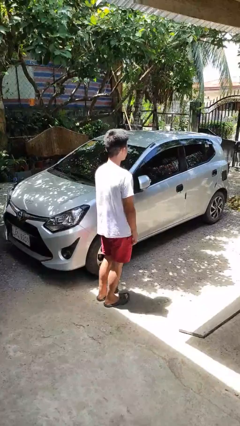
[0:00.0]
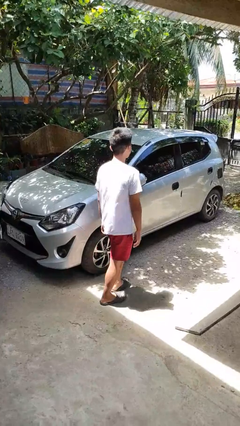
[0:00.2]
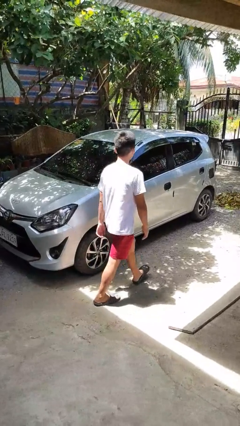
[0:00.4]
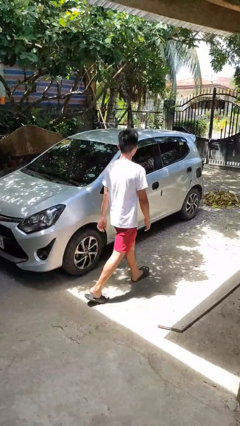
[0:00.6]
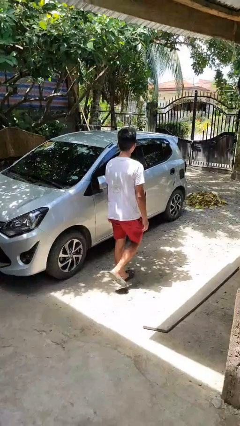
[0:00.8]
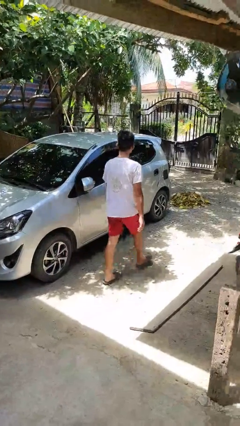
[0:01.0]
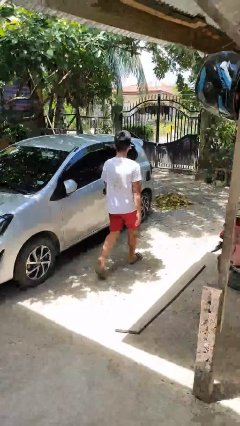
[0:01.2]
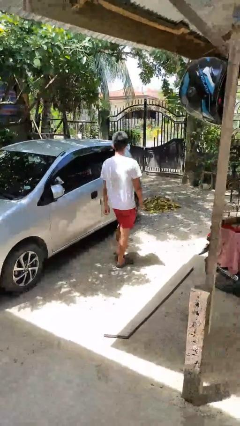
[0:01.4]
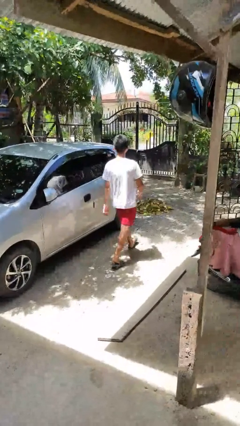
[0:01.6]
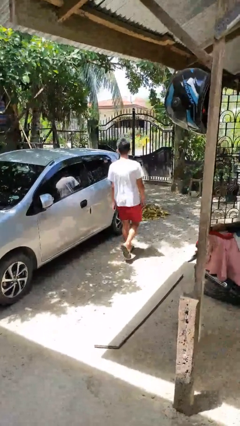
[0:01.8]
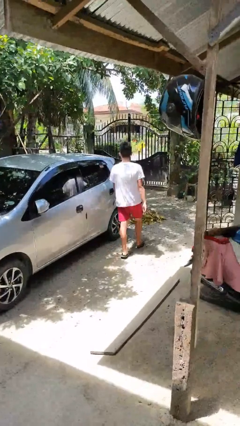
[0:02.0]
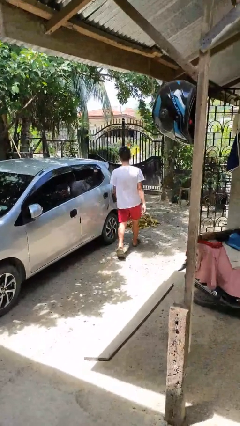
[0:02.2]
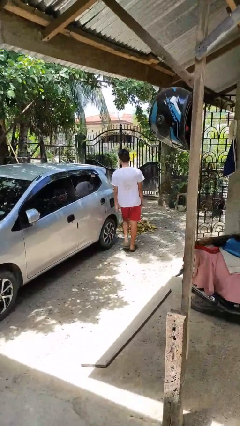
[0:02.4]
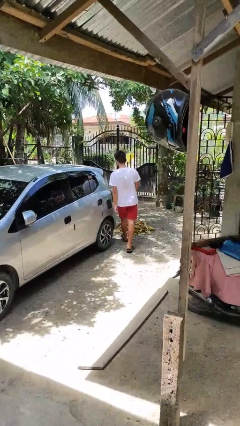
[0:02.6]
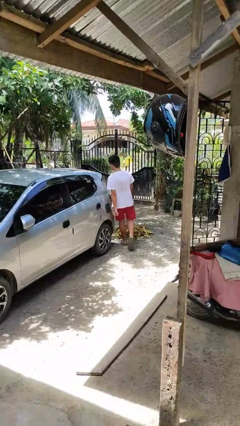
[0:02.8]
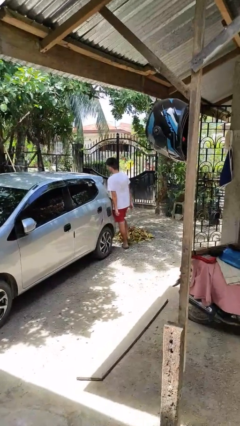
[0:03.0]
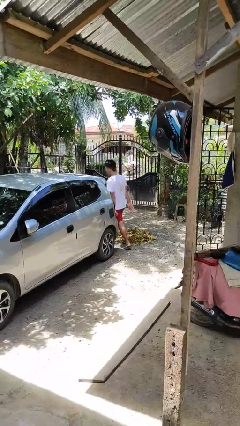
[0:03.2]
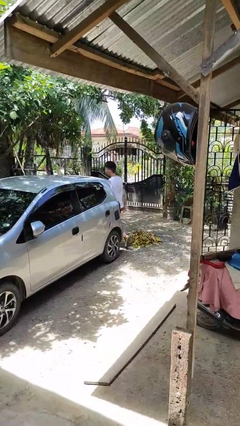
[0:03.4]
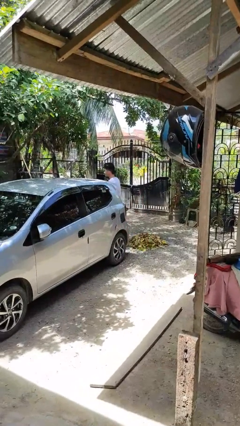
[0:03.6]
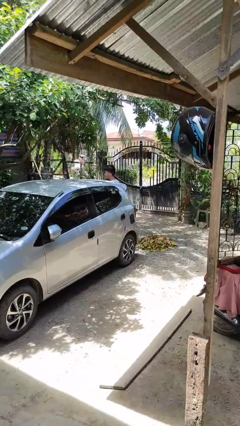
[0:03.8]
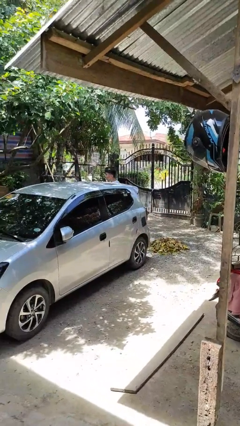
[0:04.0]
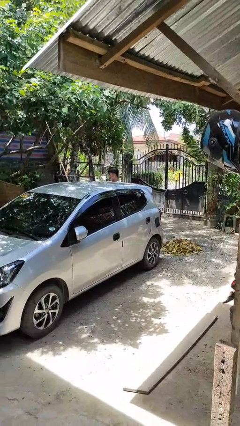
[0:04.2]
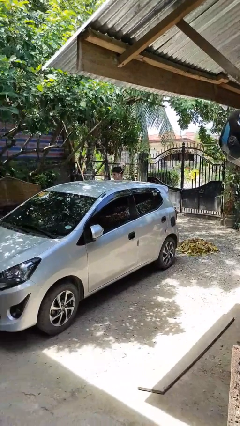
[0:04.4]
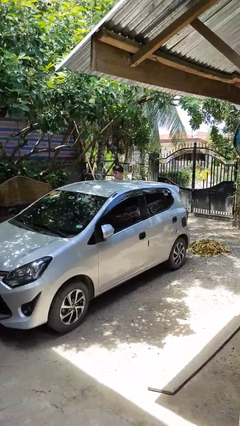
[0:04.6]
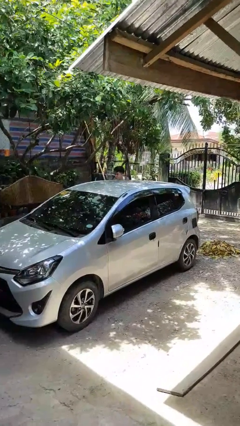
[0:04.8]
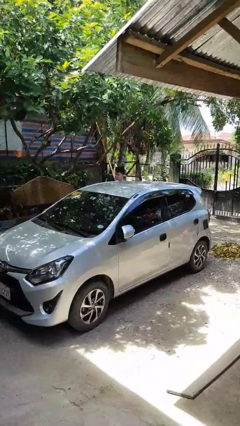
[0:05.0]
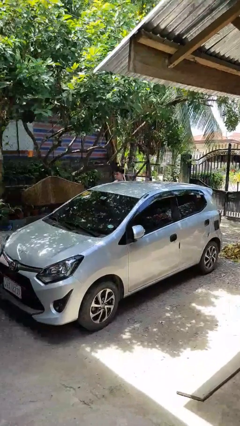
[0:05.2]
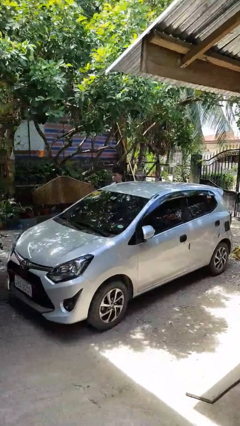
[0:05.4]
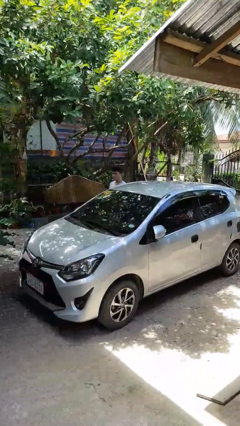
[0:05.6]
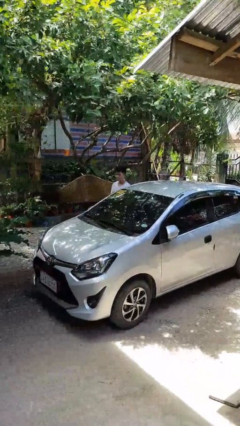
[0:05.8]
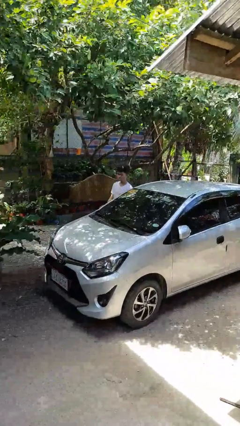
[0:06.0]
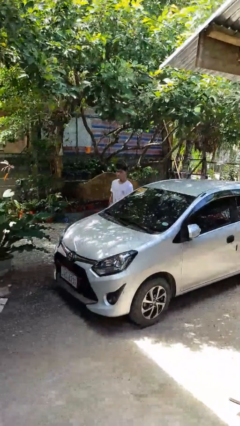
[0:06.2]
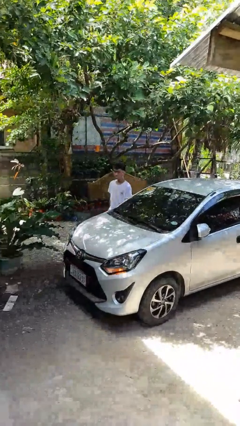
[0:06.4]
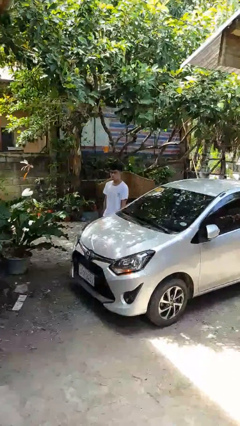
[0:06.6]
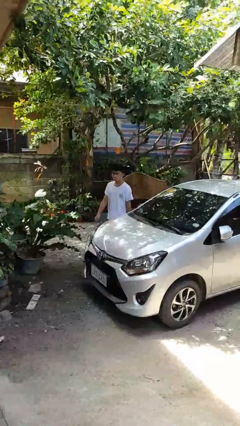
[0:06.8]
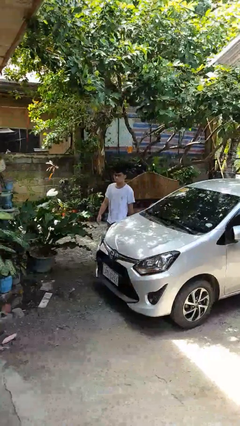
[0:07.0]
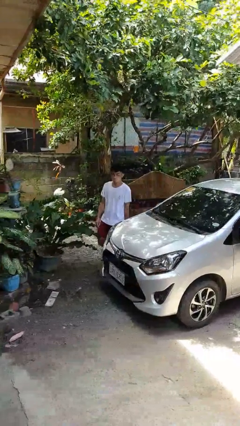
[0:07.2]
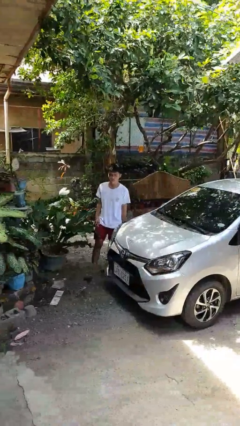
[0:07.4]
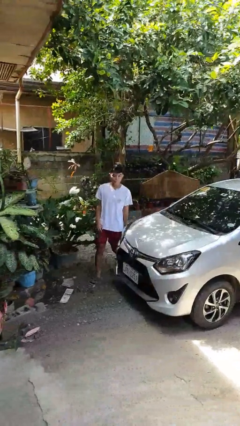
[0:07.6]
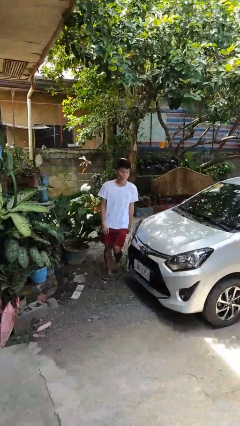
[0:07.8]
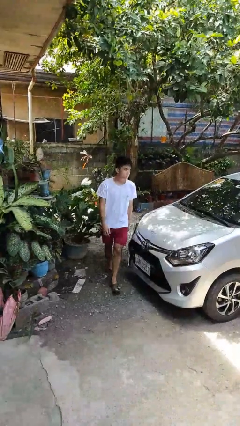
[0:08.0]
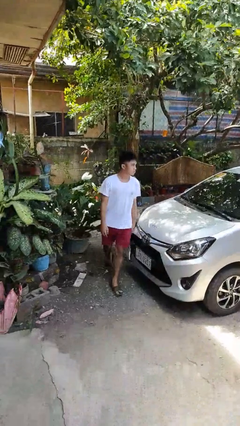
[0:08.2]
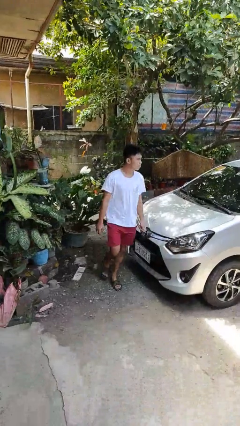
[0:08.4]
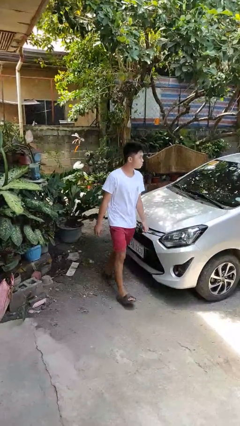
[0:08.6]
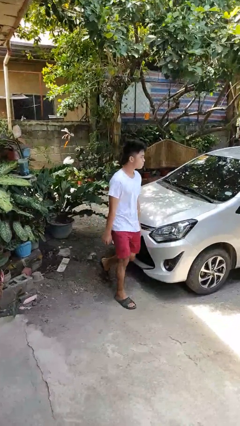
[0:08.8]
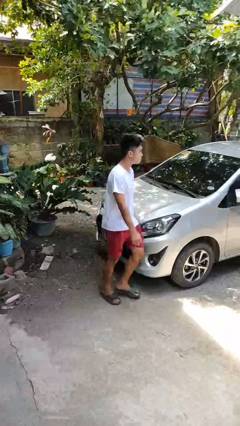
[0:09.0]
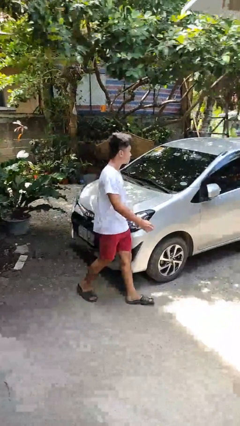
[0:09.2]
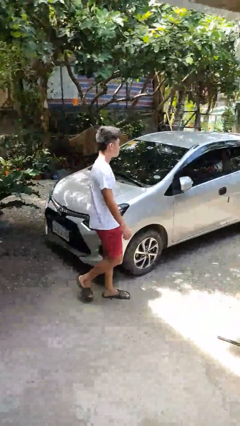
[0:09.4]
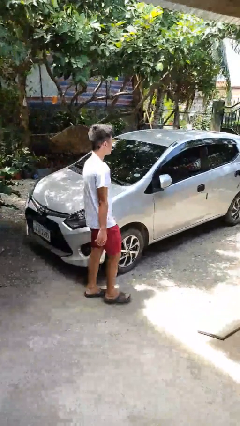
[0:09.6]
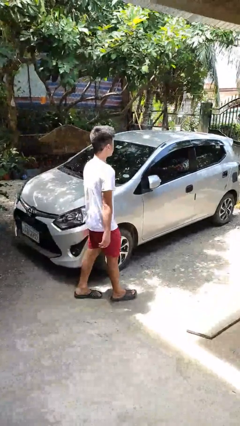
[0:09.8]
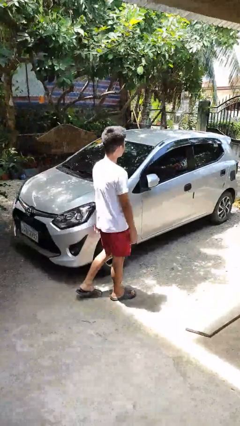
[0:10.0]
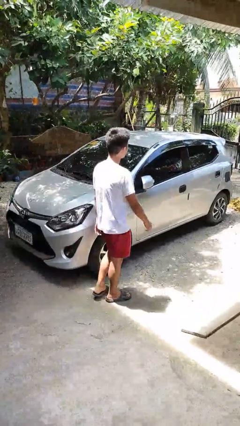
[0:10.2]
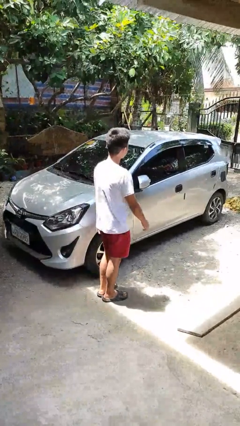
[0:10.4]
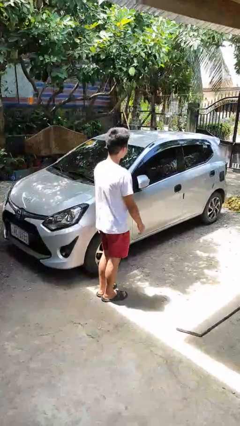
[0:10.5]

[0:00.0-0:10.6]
person walks around car

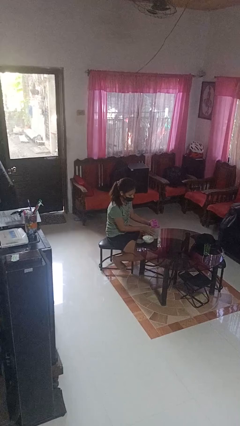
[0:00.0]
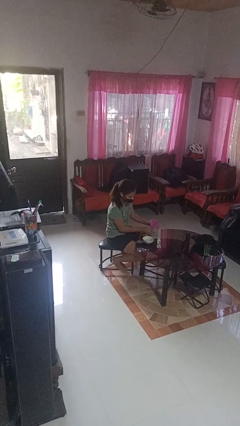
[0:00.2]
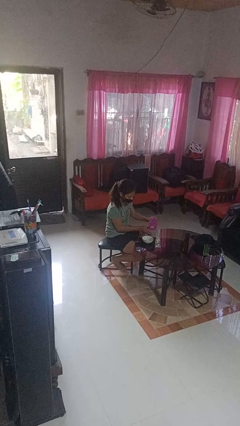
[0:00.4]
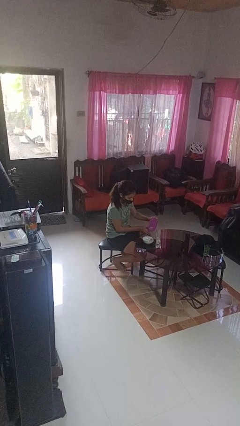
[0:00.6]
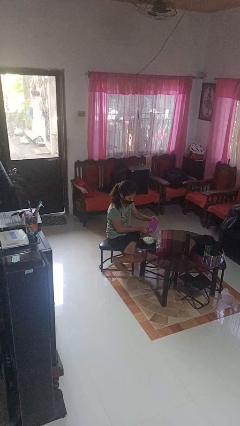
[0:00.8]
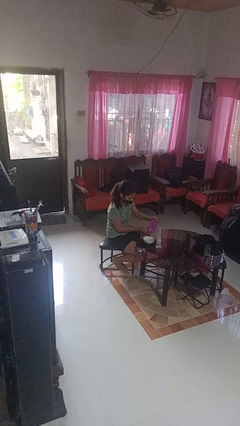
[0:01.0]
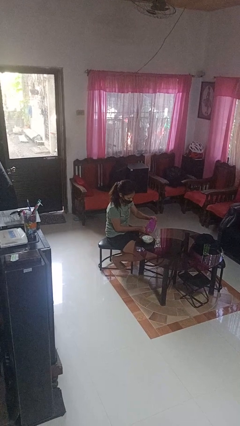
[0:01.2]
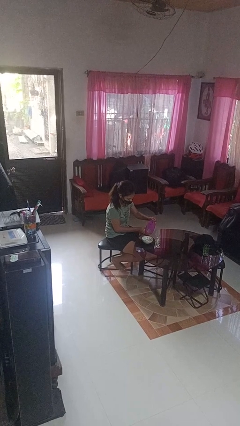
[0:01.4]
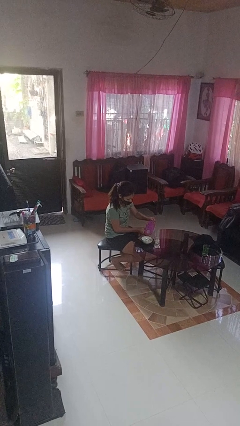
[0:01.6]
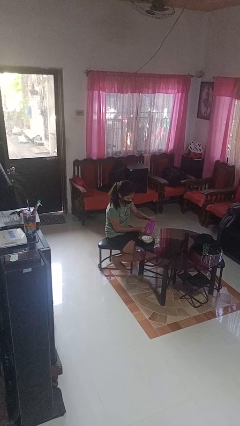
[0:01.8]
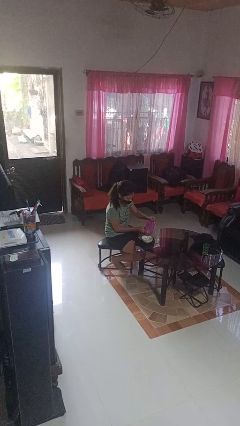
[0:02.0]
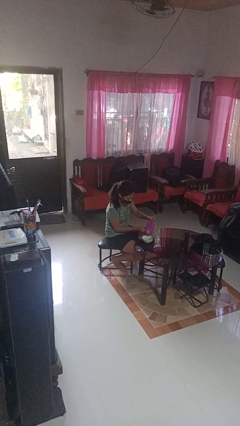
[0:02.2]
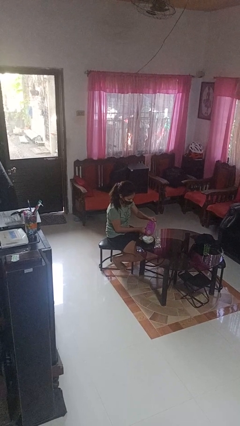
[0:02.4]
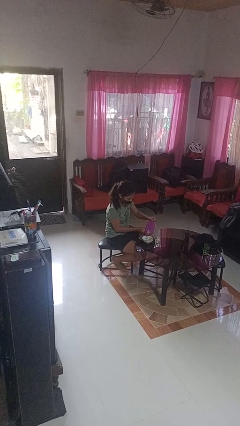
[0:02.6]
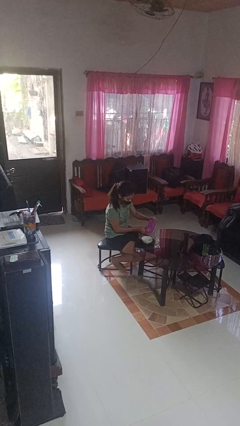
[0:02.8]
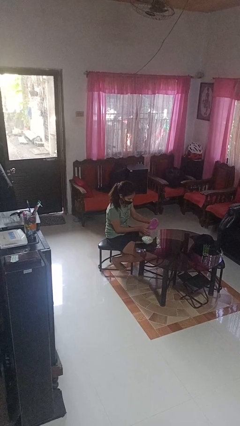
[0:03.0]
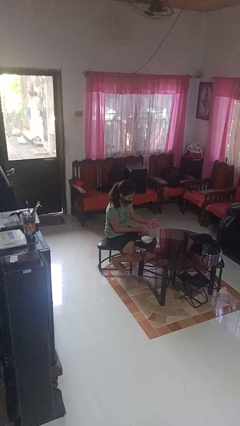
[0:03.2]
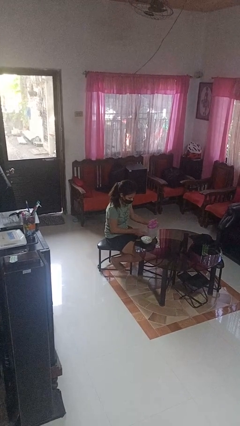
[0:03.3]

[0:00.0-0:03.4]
person pours into bowl

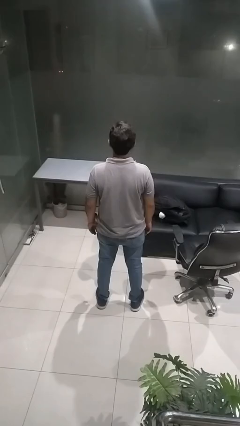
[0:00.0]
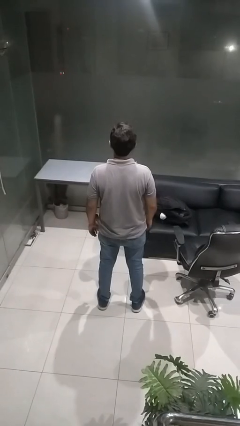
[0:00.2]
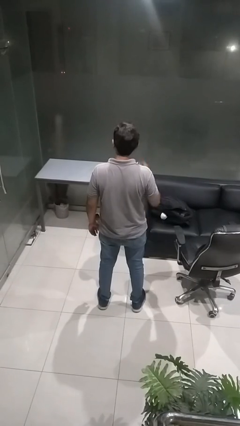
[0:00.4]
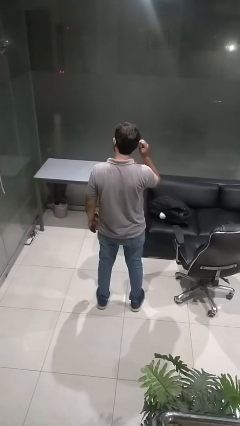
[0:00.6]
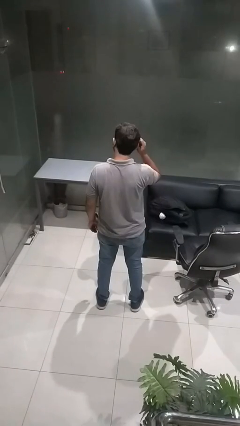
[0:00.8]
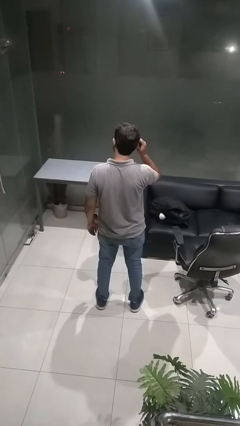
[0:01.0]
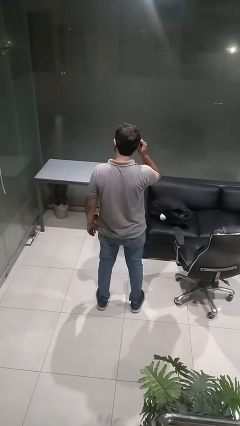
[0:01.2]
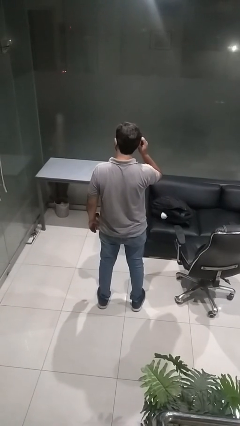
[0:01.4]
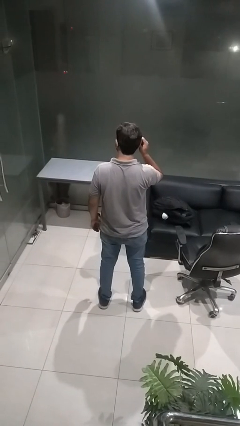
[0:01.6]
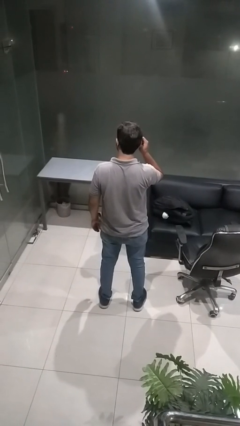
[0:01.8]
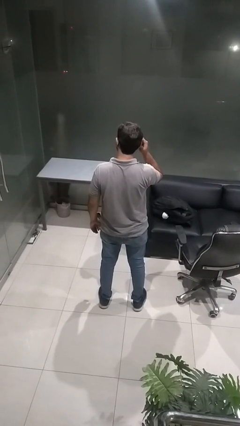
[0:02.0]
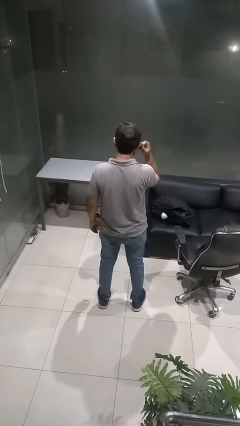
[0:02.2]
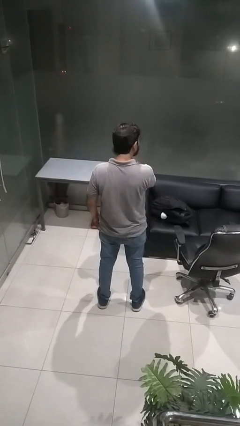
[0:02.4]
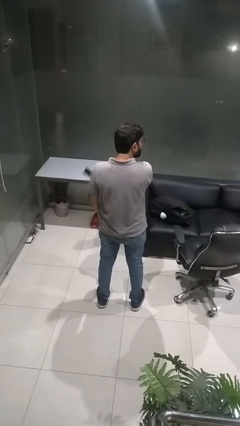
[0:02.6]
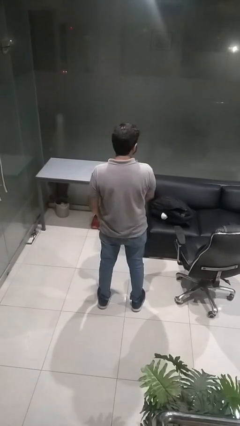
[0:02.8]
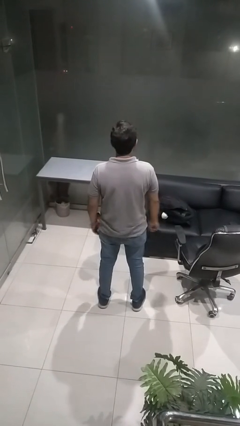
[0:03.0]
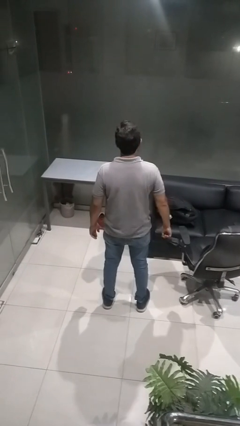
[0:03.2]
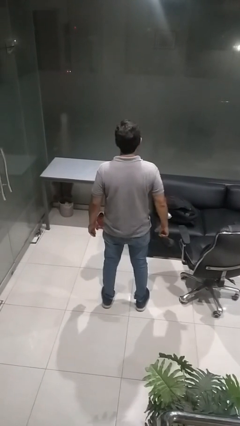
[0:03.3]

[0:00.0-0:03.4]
person takes off facemask

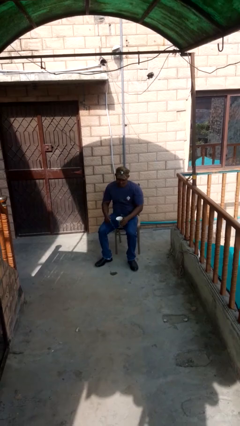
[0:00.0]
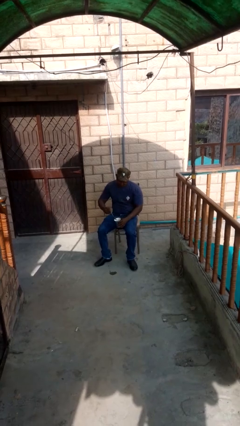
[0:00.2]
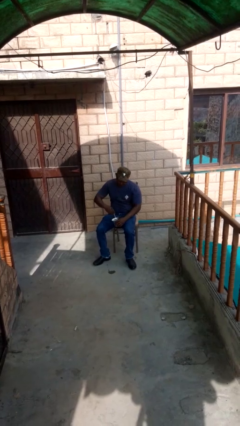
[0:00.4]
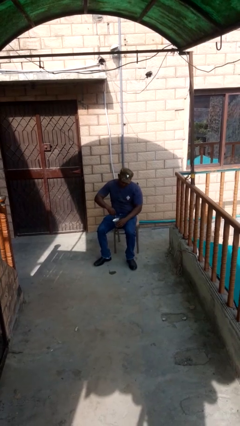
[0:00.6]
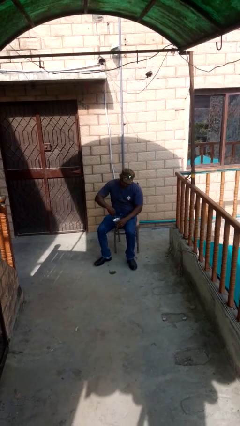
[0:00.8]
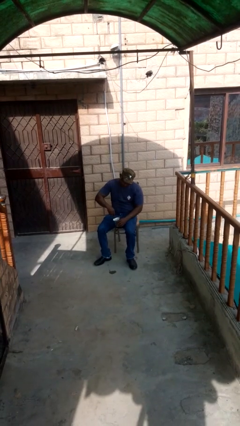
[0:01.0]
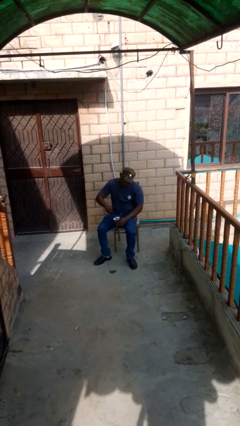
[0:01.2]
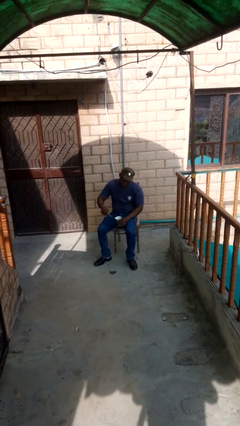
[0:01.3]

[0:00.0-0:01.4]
person stirs mug
